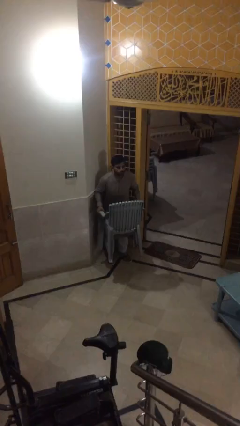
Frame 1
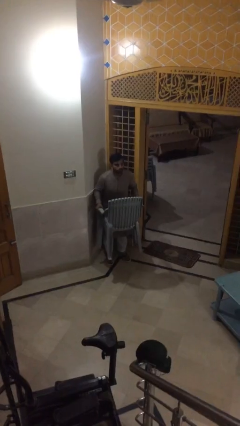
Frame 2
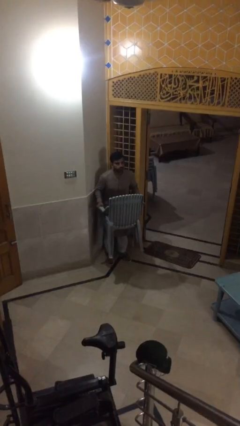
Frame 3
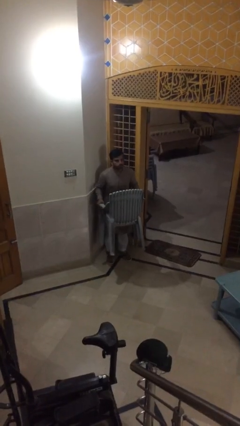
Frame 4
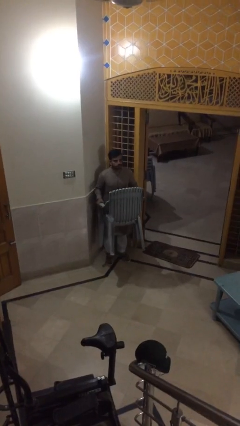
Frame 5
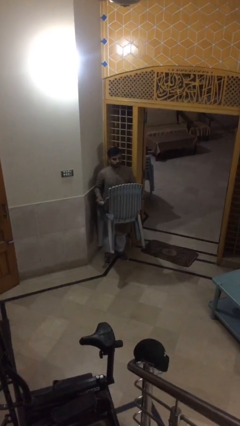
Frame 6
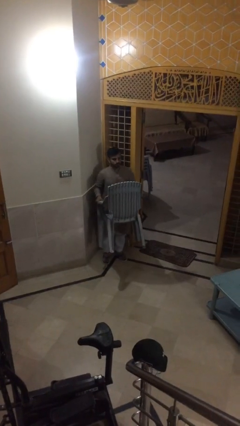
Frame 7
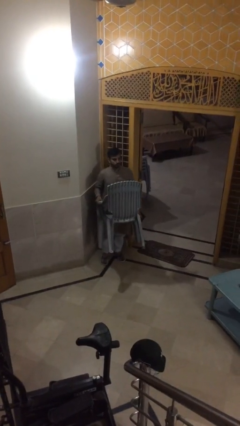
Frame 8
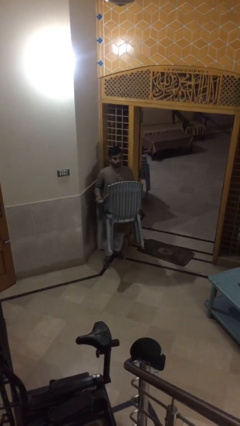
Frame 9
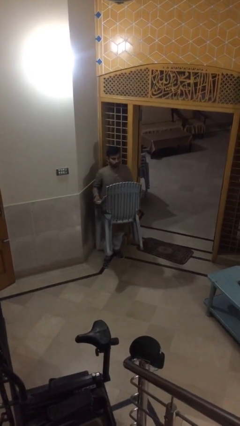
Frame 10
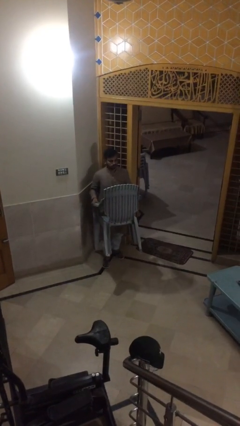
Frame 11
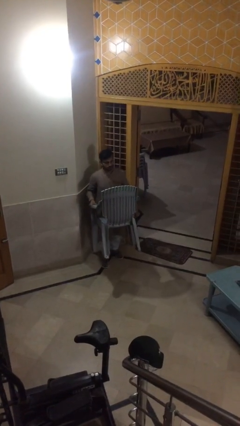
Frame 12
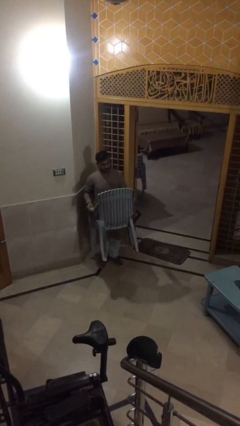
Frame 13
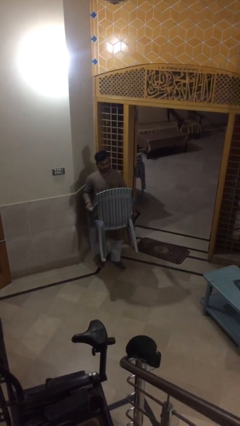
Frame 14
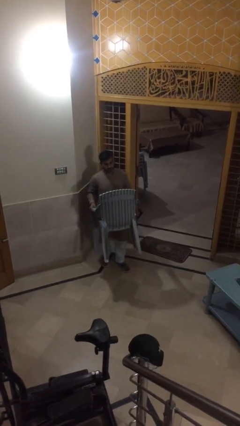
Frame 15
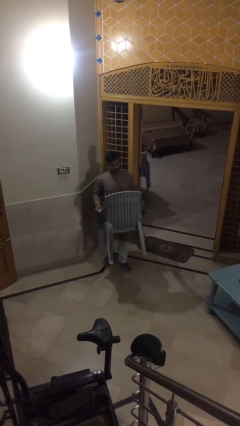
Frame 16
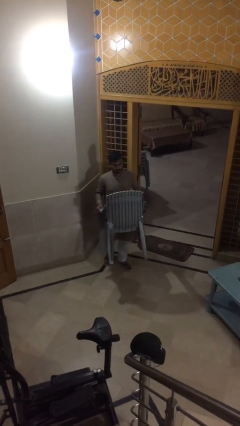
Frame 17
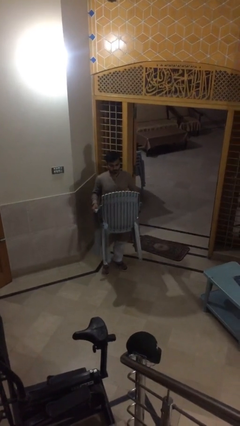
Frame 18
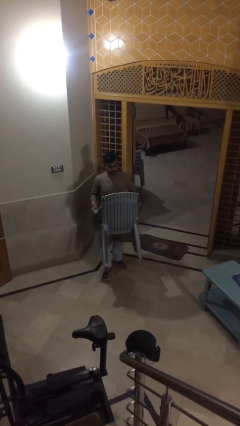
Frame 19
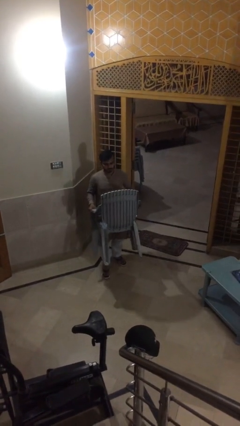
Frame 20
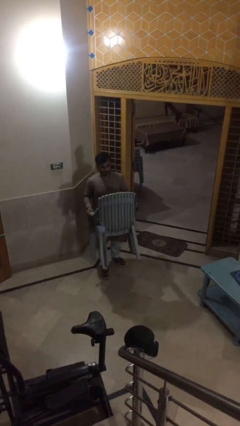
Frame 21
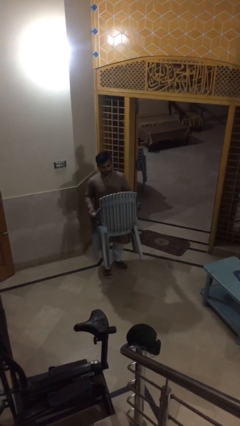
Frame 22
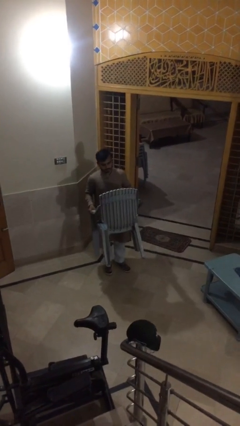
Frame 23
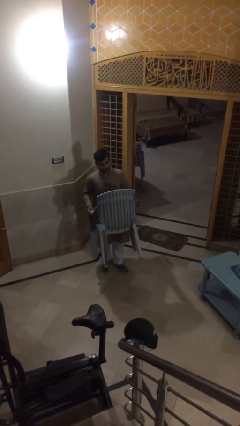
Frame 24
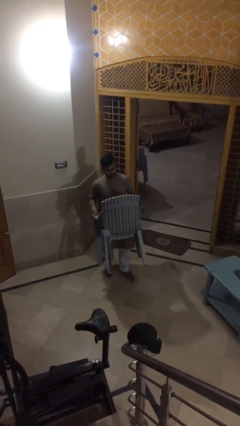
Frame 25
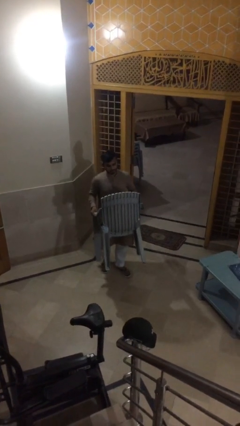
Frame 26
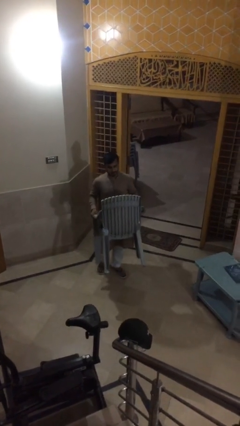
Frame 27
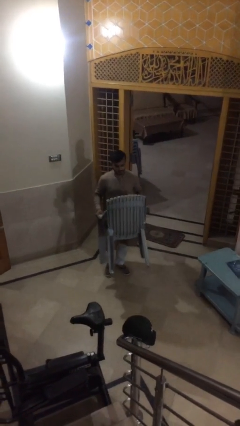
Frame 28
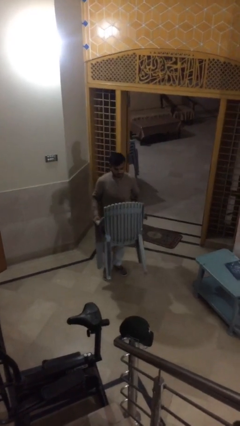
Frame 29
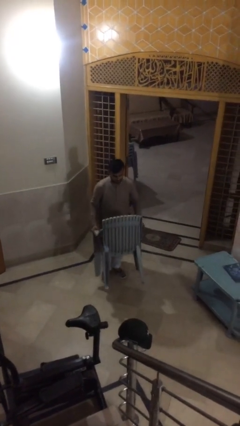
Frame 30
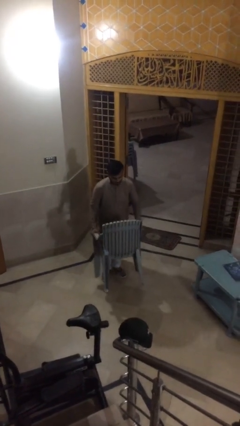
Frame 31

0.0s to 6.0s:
person carries heavy object

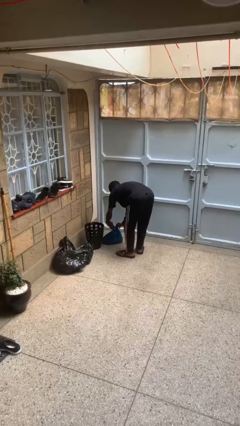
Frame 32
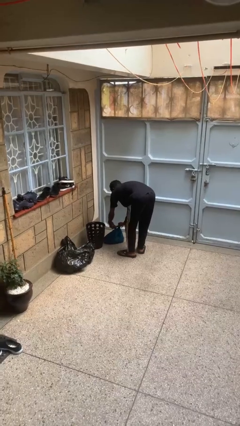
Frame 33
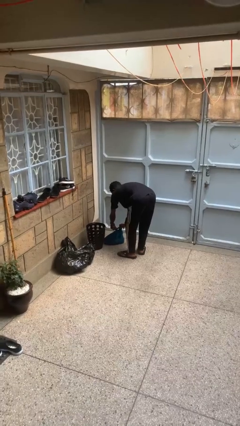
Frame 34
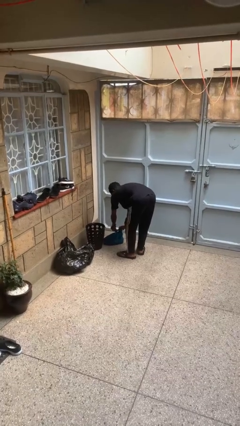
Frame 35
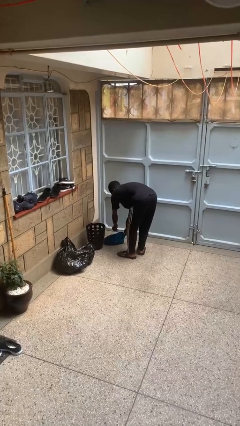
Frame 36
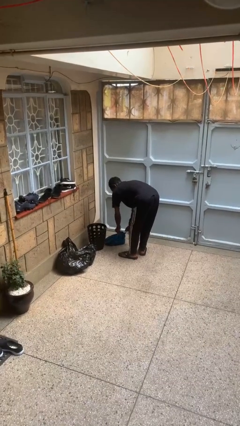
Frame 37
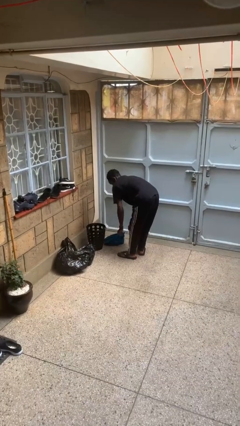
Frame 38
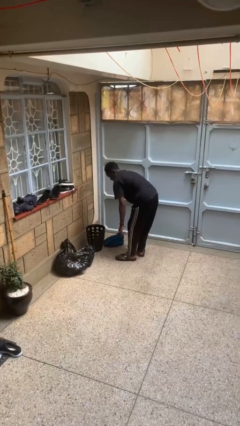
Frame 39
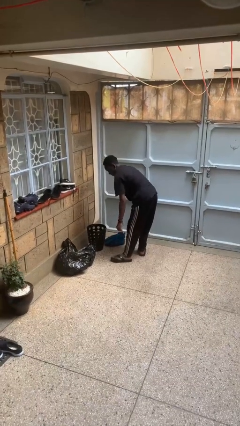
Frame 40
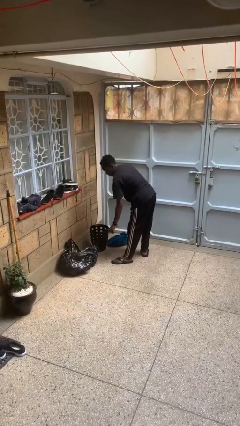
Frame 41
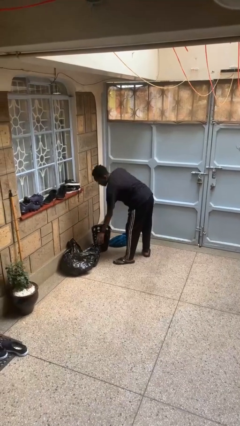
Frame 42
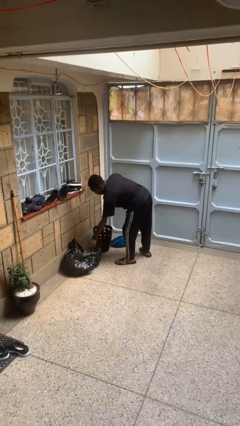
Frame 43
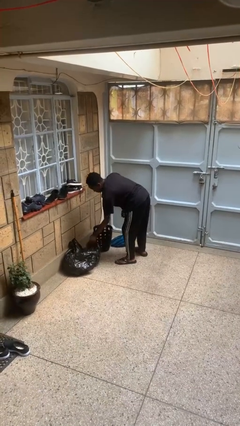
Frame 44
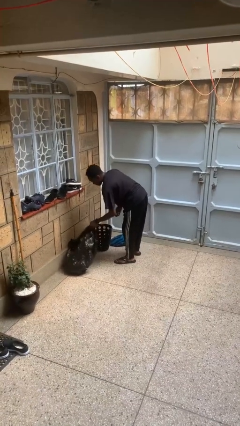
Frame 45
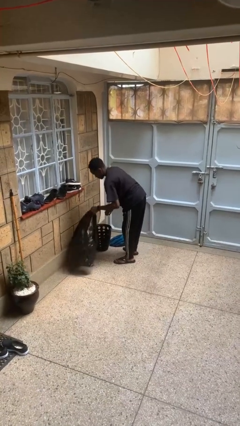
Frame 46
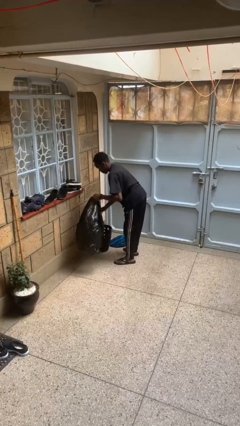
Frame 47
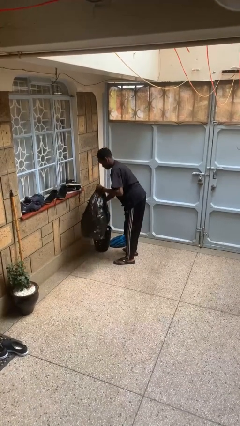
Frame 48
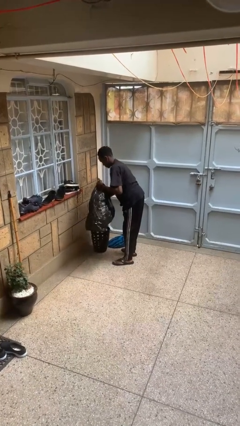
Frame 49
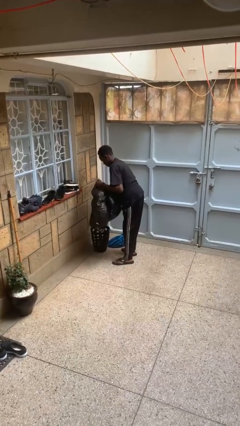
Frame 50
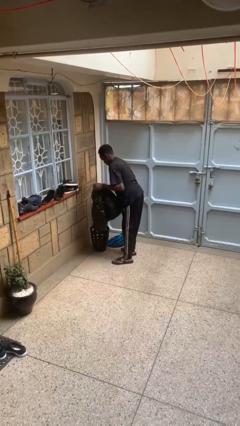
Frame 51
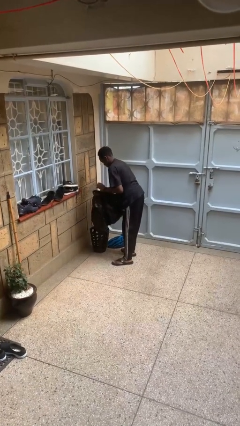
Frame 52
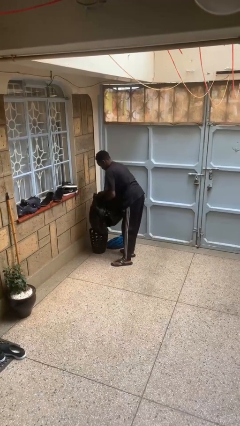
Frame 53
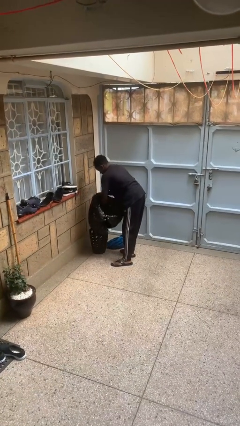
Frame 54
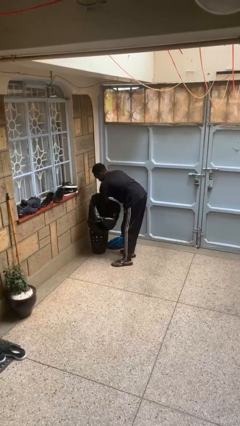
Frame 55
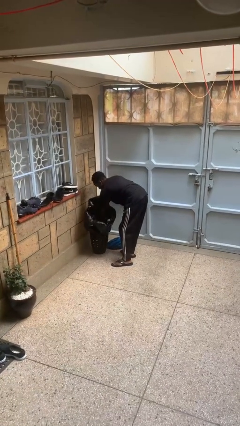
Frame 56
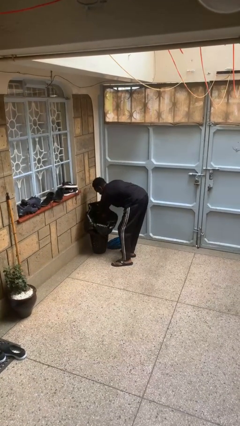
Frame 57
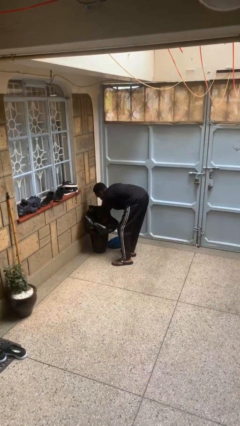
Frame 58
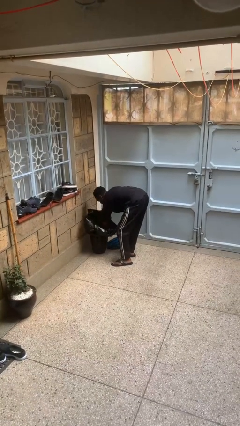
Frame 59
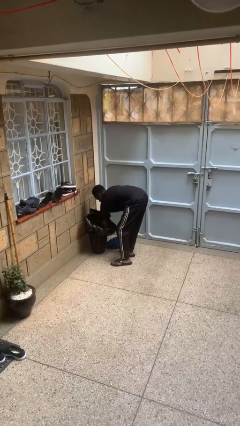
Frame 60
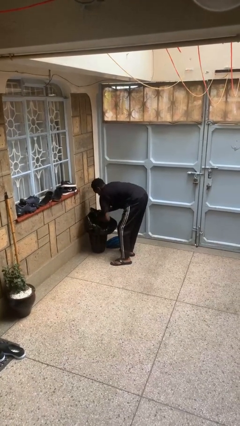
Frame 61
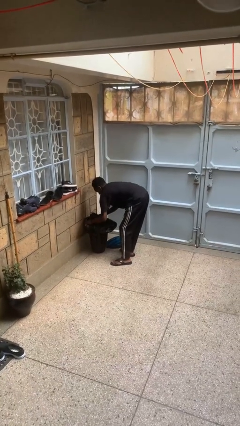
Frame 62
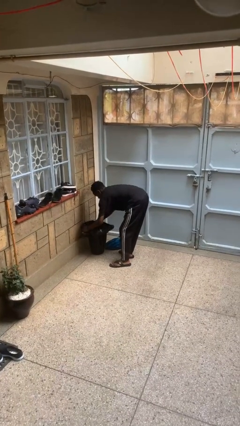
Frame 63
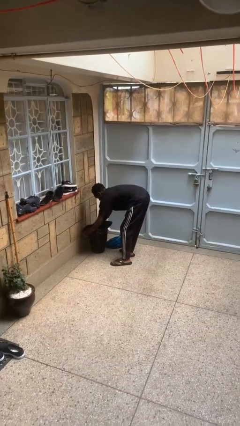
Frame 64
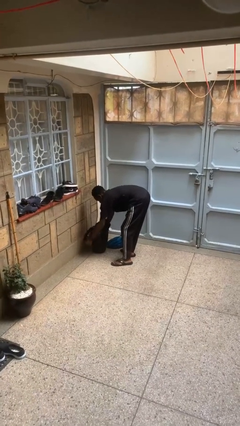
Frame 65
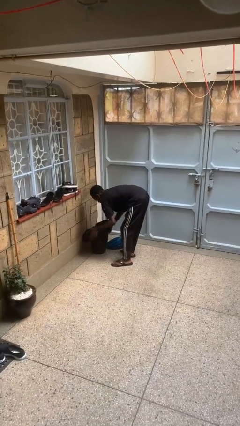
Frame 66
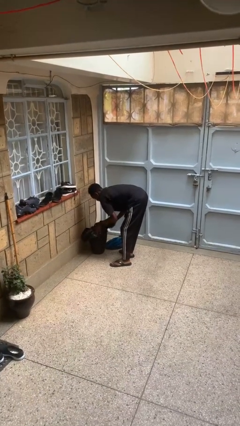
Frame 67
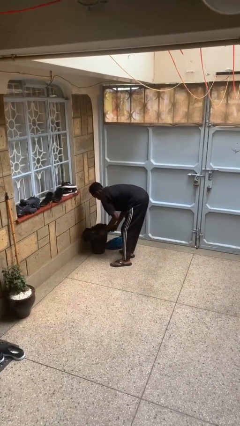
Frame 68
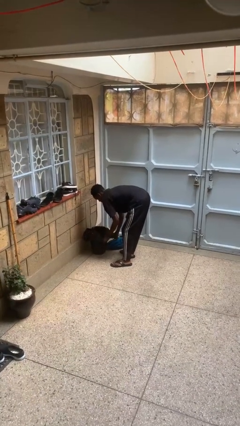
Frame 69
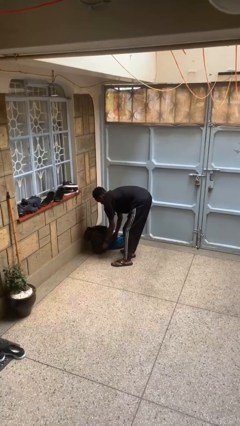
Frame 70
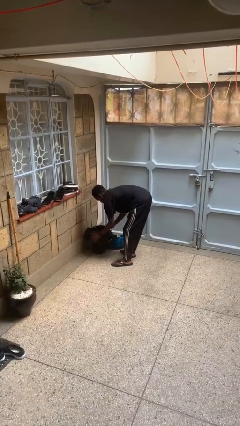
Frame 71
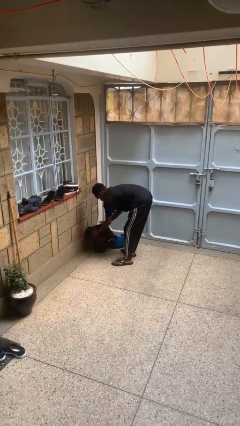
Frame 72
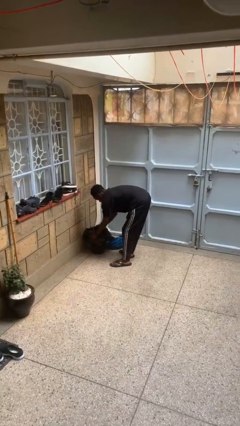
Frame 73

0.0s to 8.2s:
person inserts trashbag into trashcan

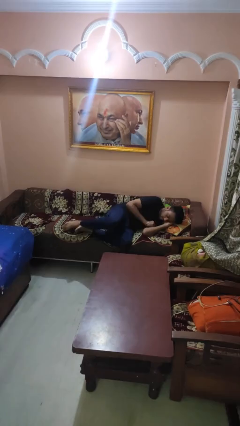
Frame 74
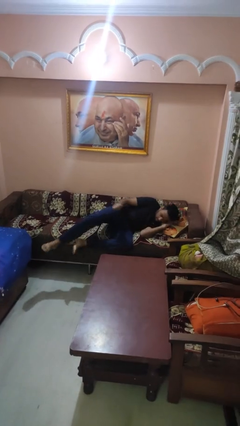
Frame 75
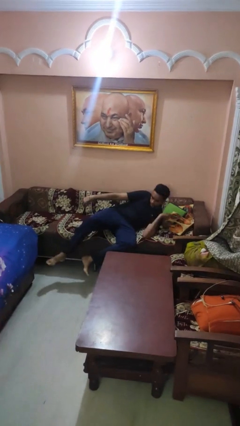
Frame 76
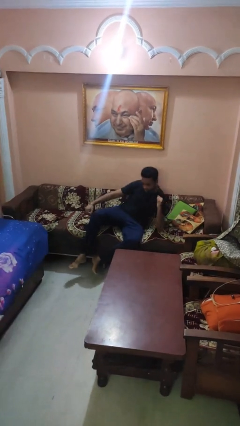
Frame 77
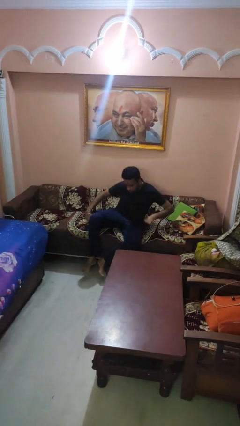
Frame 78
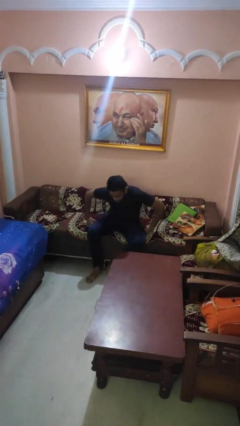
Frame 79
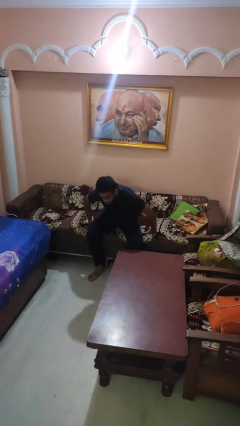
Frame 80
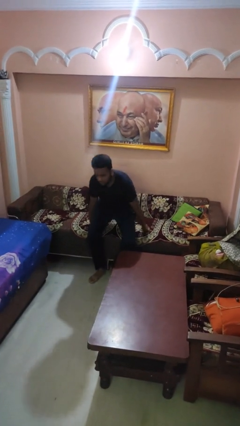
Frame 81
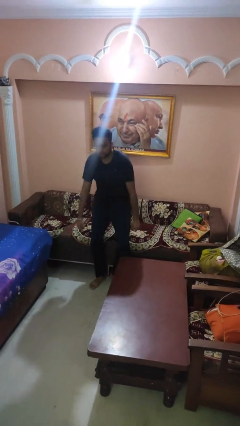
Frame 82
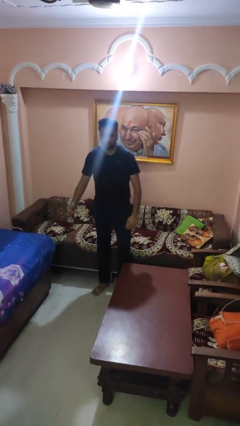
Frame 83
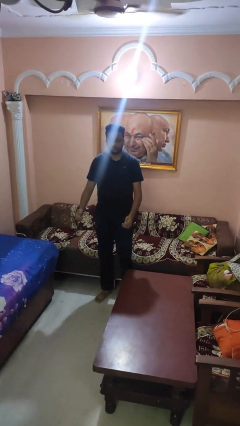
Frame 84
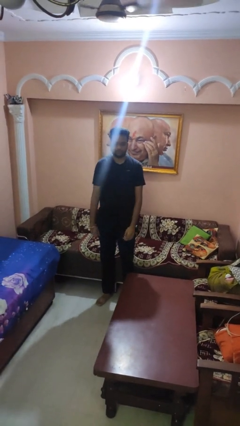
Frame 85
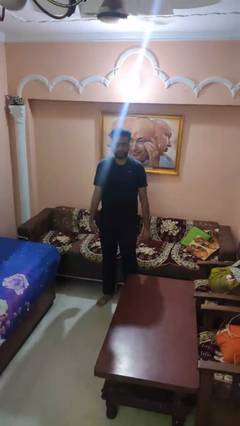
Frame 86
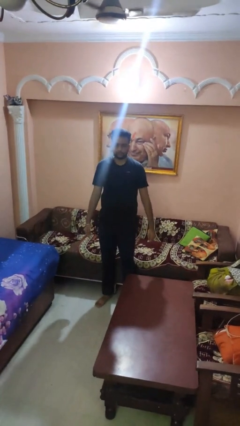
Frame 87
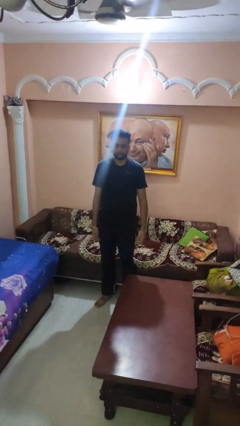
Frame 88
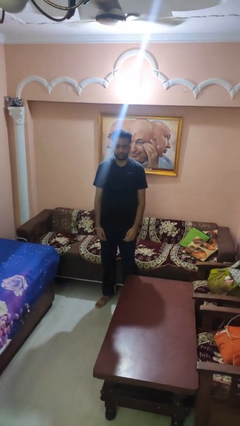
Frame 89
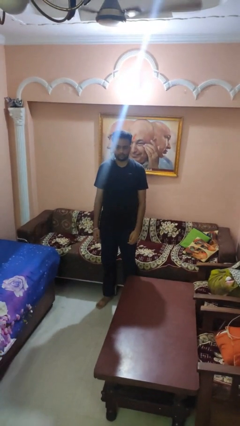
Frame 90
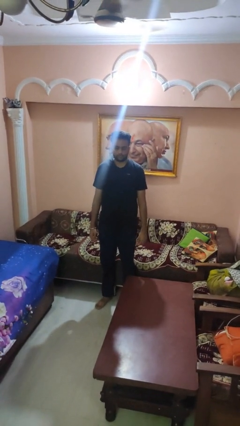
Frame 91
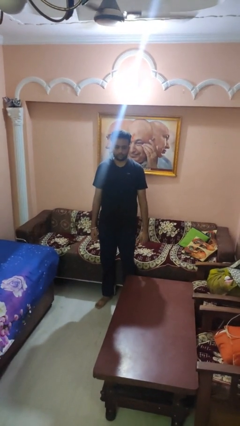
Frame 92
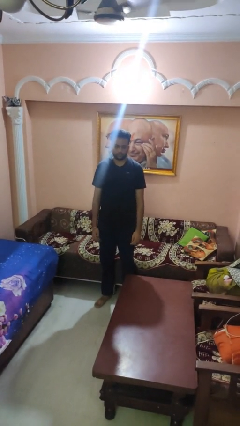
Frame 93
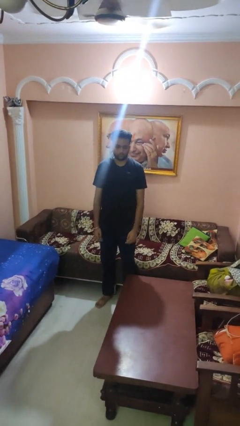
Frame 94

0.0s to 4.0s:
person stands up
